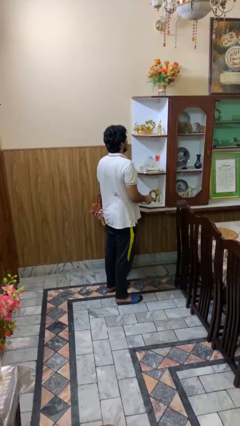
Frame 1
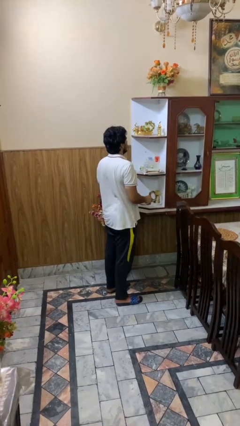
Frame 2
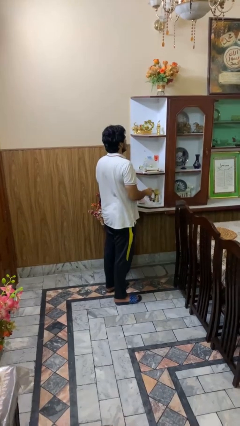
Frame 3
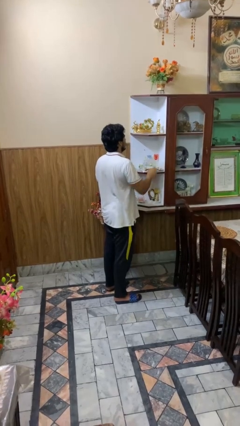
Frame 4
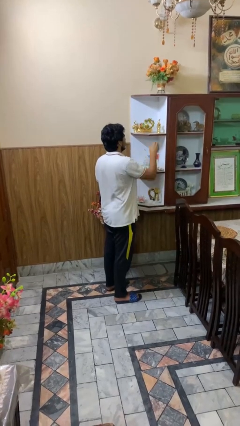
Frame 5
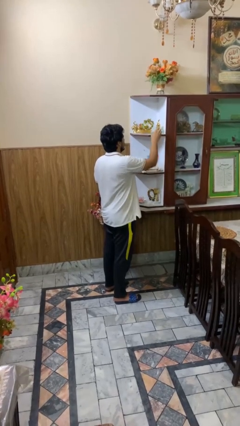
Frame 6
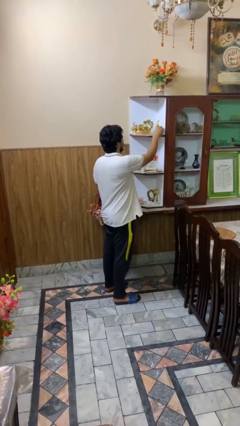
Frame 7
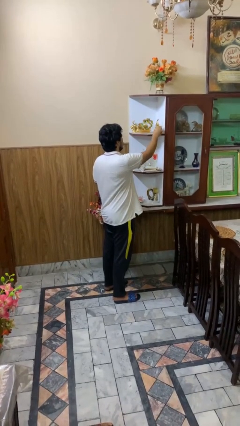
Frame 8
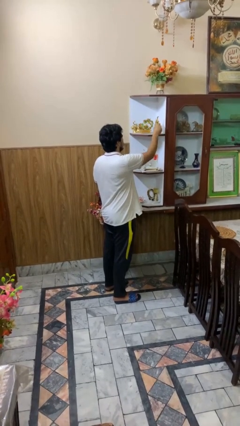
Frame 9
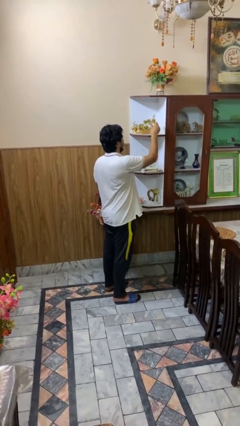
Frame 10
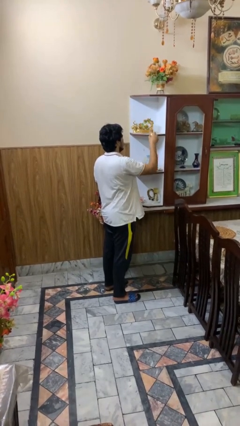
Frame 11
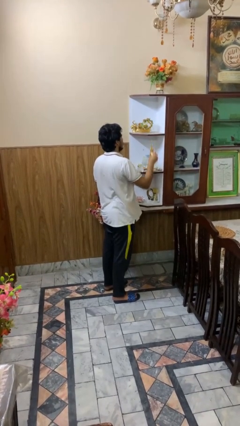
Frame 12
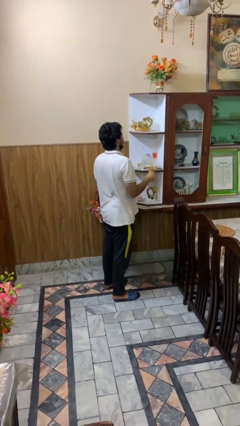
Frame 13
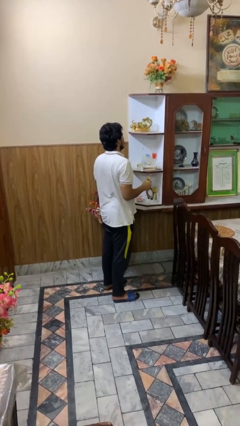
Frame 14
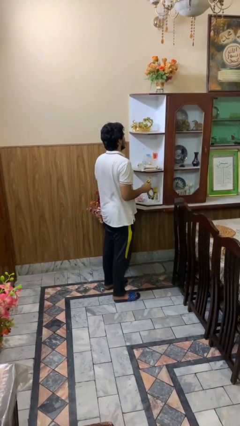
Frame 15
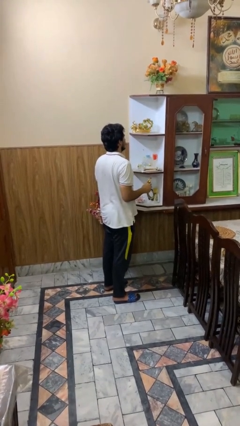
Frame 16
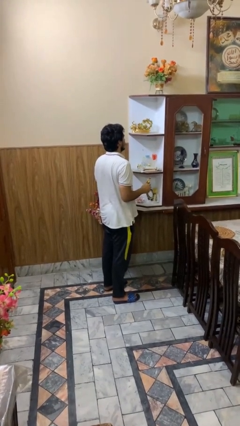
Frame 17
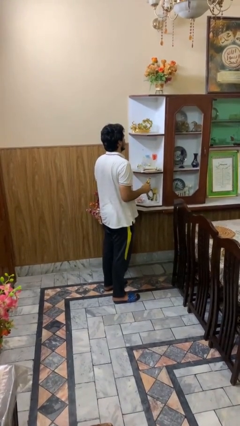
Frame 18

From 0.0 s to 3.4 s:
person picks up object from shelf

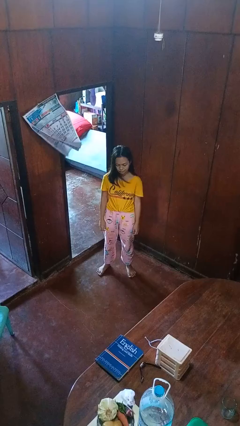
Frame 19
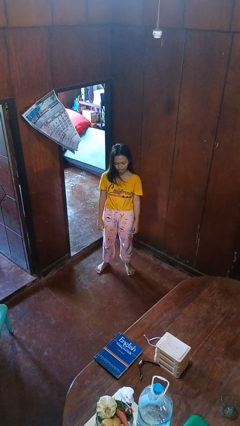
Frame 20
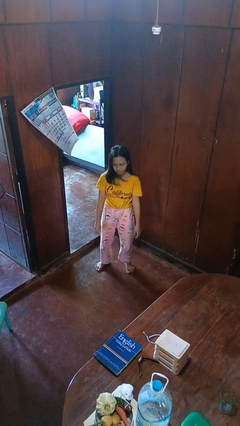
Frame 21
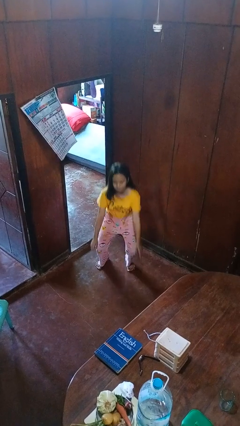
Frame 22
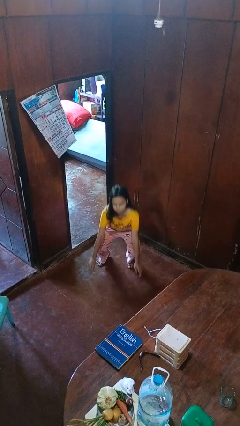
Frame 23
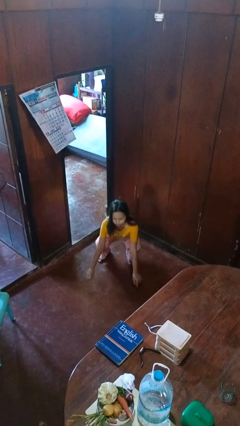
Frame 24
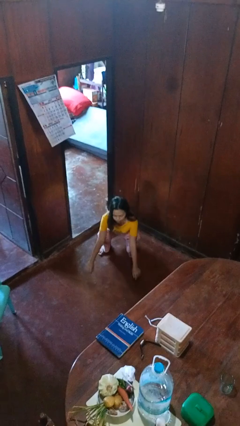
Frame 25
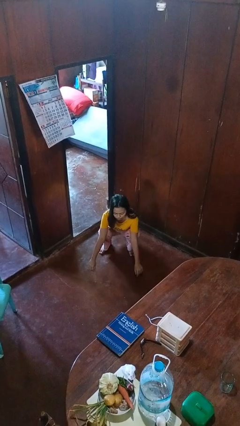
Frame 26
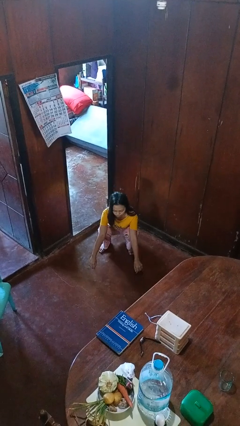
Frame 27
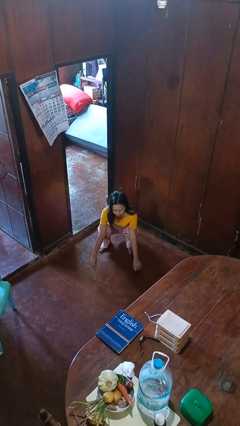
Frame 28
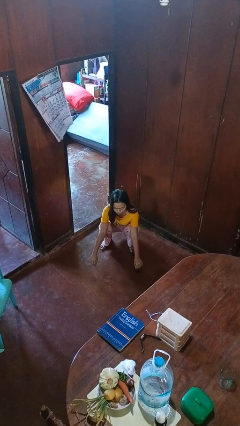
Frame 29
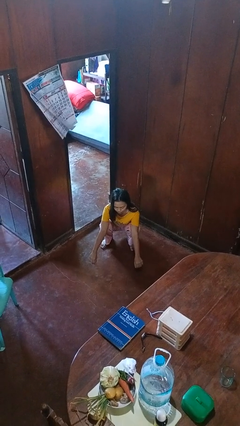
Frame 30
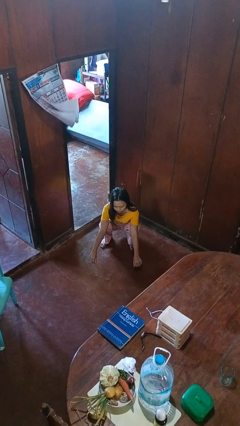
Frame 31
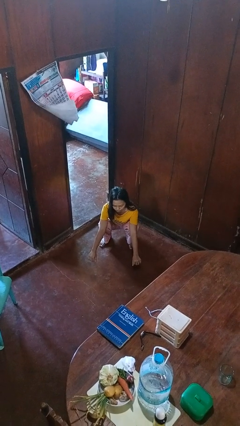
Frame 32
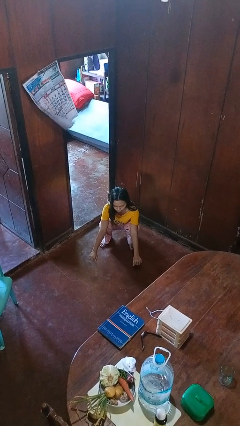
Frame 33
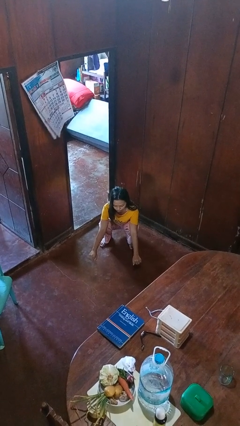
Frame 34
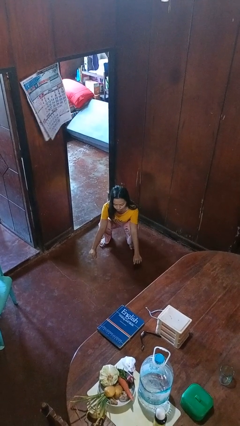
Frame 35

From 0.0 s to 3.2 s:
person squats

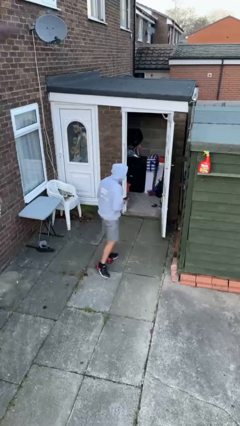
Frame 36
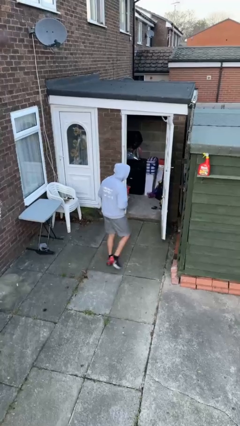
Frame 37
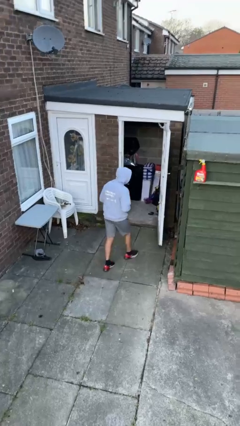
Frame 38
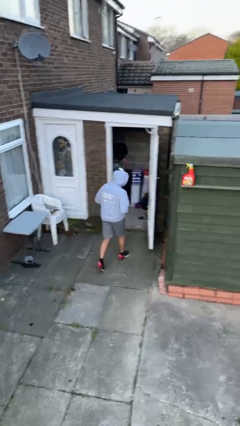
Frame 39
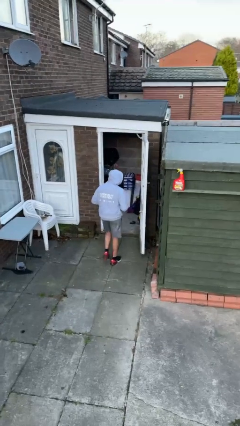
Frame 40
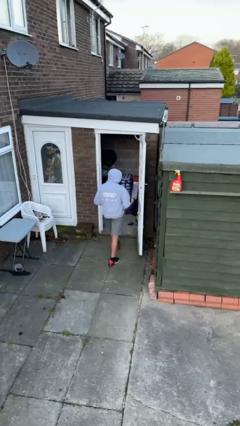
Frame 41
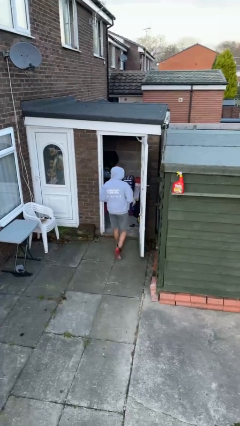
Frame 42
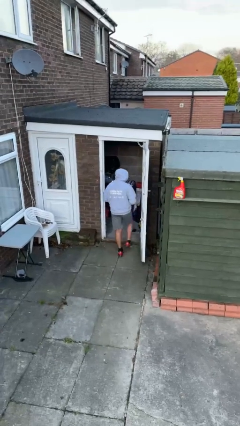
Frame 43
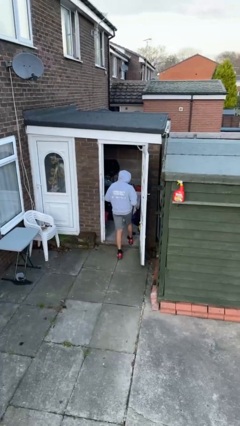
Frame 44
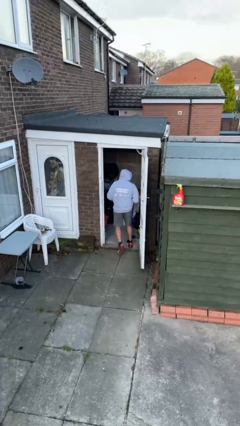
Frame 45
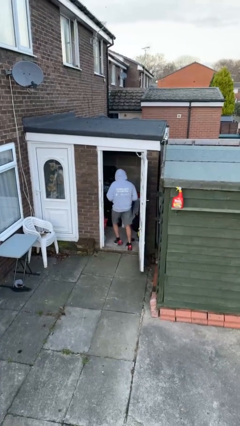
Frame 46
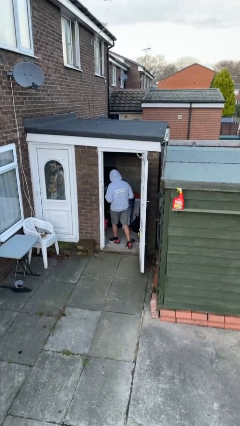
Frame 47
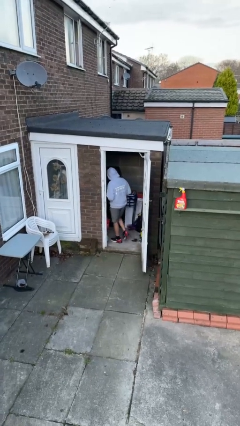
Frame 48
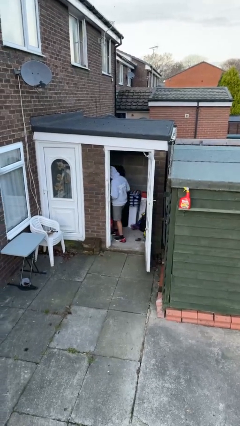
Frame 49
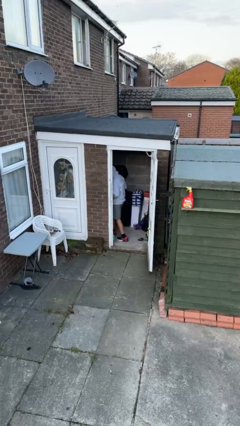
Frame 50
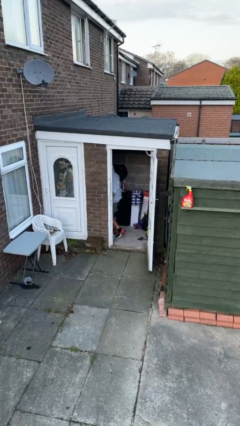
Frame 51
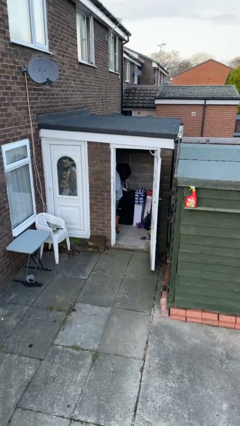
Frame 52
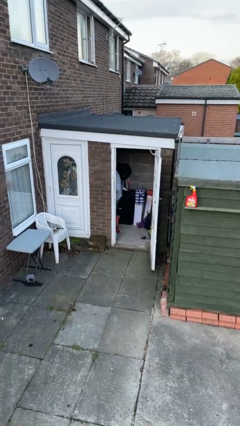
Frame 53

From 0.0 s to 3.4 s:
person exits scene through structure

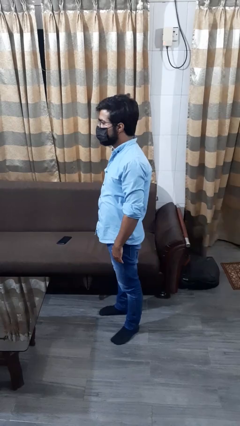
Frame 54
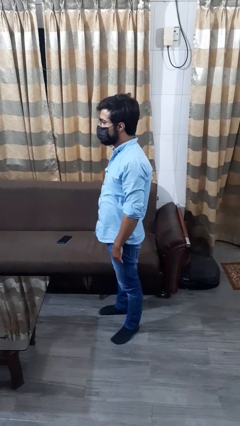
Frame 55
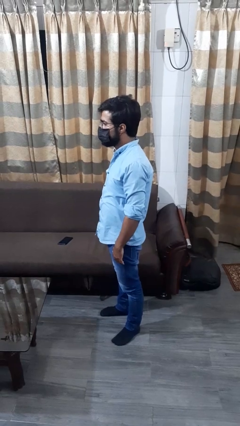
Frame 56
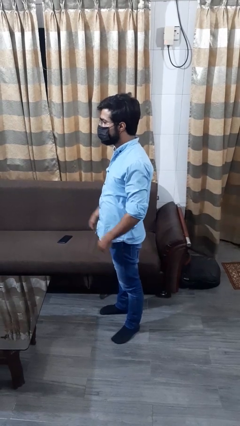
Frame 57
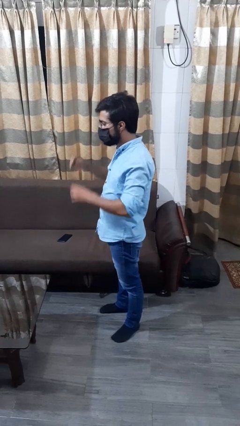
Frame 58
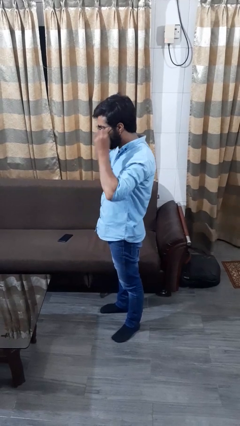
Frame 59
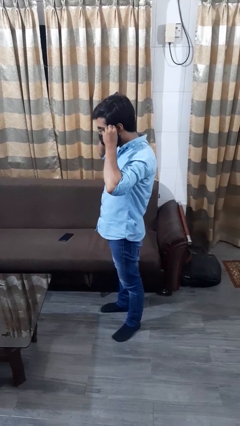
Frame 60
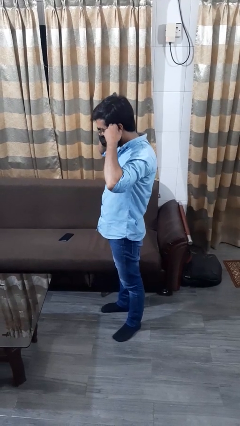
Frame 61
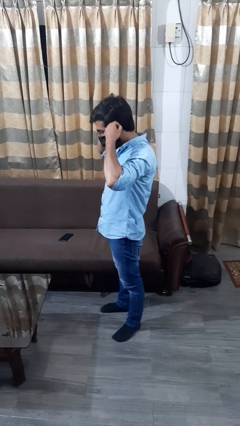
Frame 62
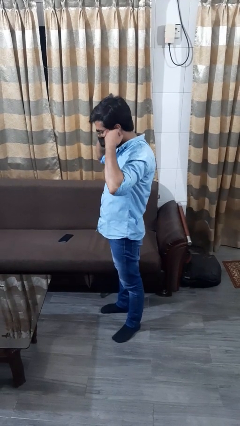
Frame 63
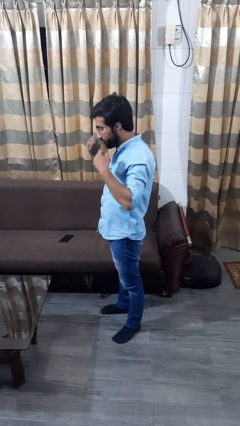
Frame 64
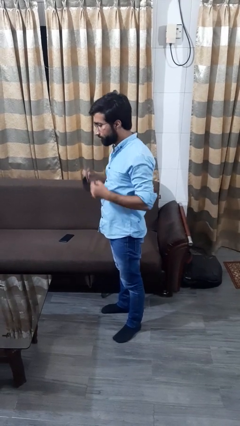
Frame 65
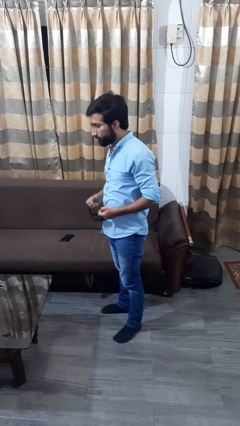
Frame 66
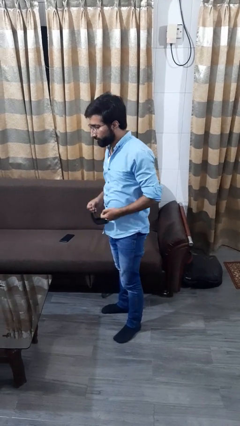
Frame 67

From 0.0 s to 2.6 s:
person takes off facemask

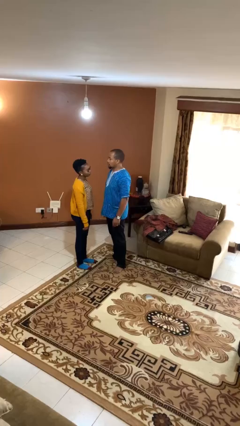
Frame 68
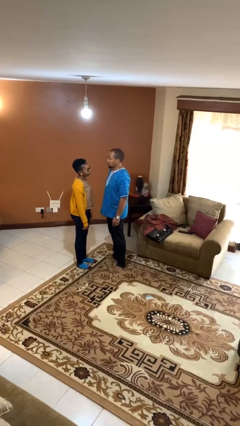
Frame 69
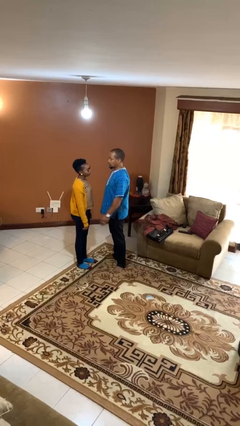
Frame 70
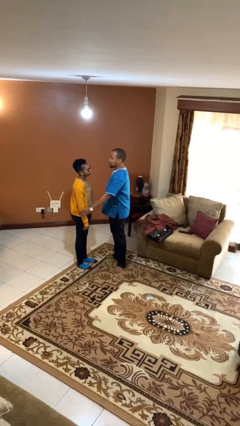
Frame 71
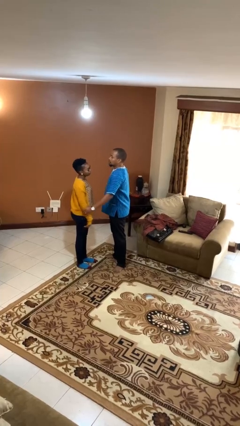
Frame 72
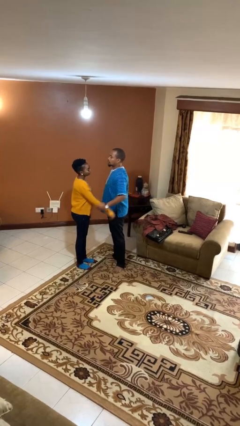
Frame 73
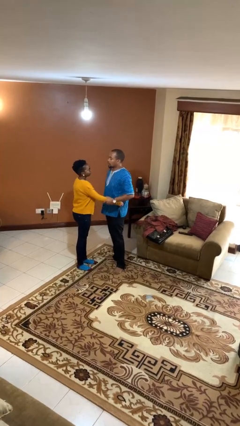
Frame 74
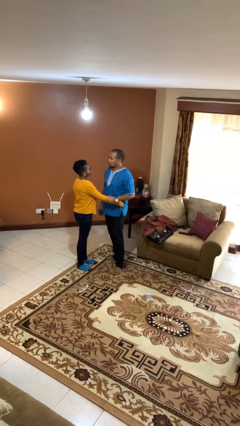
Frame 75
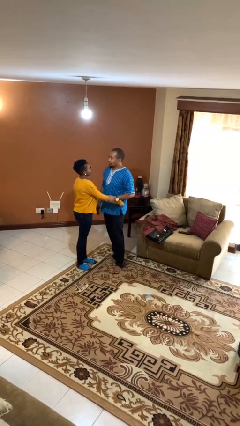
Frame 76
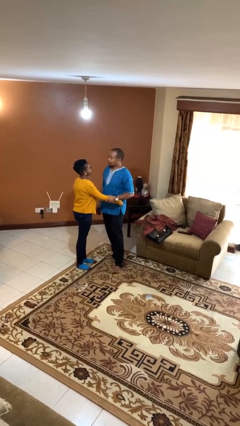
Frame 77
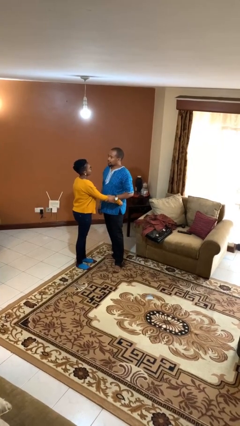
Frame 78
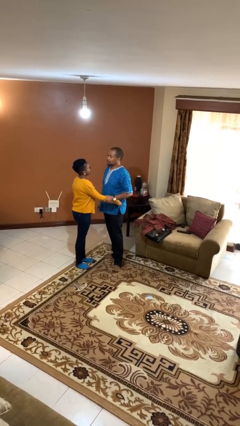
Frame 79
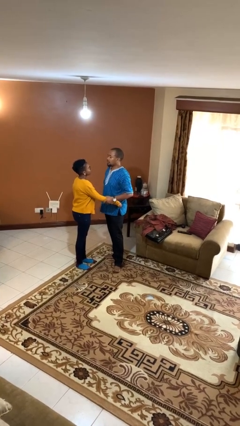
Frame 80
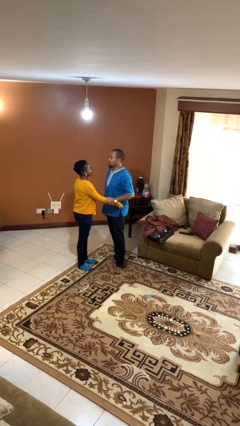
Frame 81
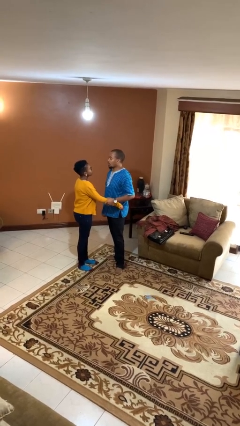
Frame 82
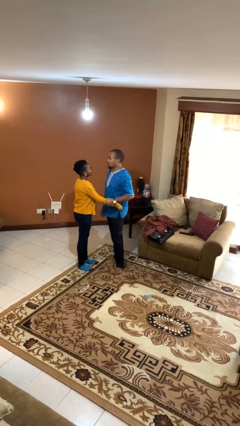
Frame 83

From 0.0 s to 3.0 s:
person grabs person by forearm

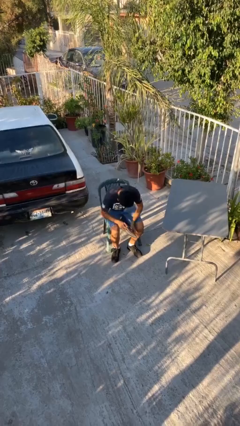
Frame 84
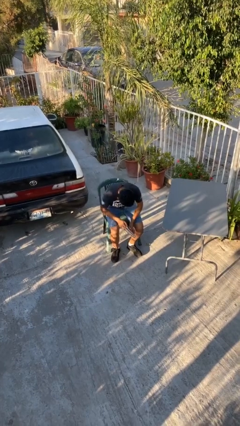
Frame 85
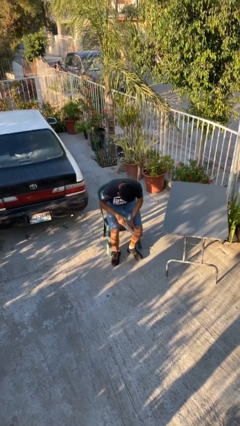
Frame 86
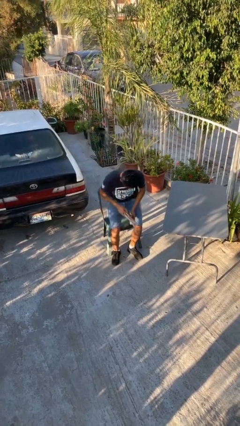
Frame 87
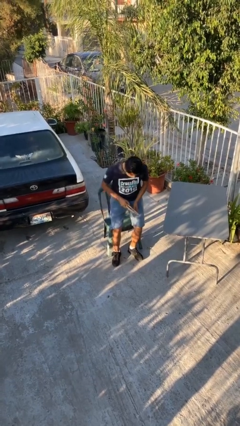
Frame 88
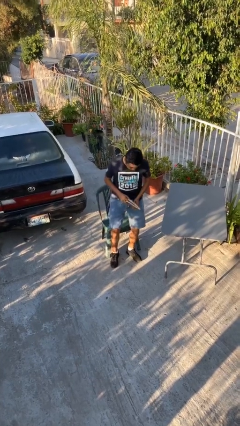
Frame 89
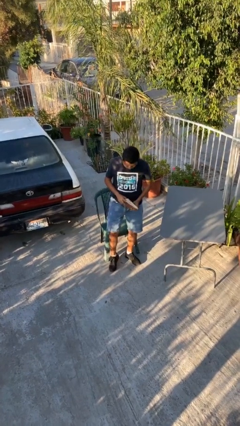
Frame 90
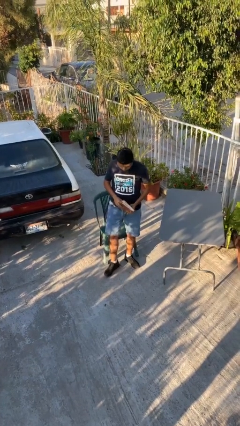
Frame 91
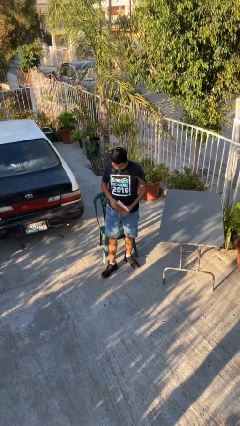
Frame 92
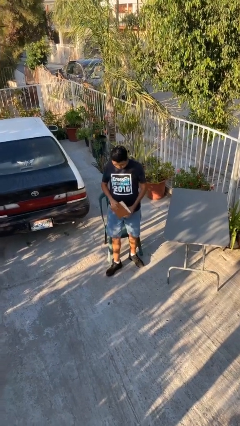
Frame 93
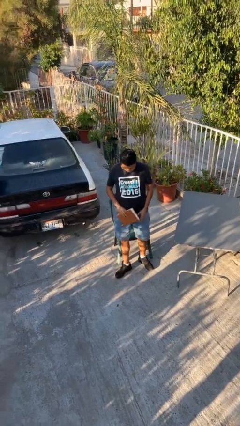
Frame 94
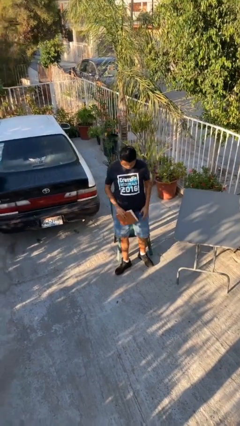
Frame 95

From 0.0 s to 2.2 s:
person stands up

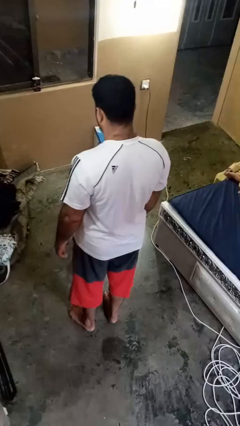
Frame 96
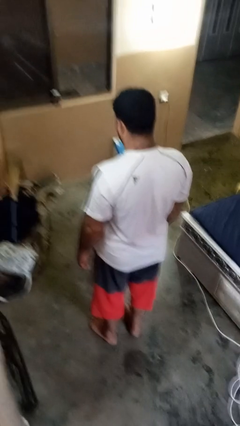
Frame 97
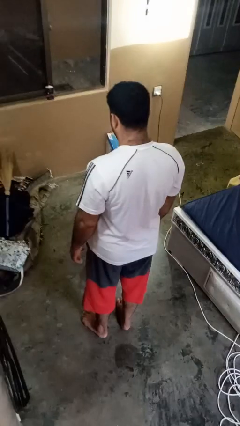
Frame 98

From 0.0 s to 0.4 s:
person lies down on floor
